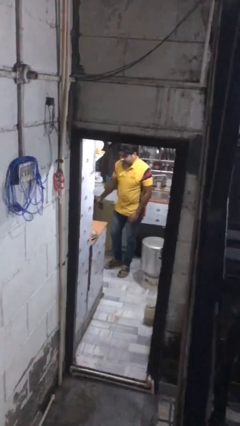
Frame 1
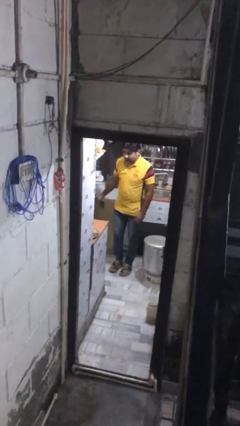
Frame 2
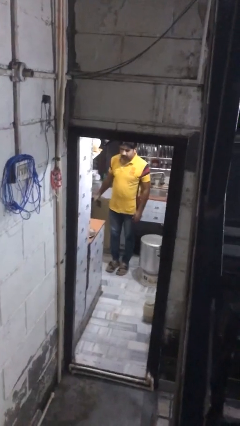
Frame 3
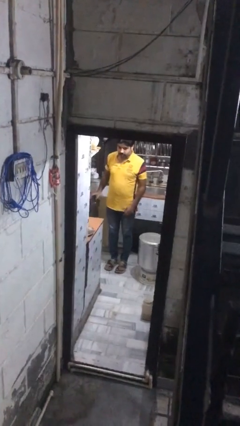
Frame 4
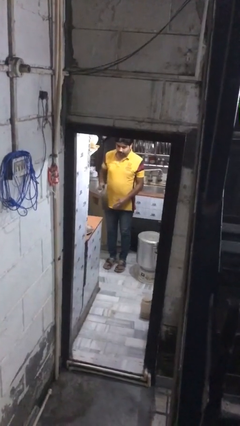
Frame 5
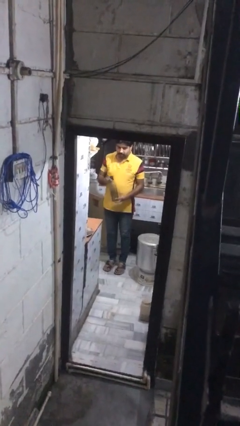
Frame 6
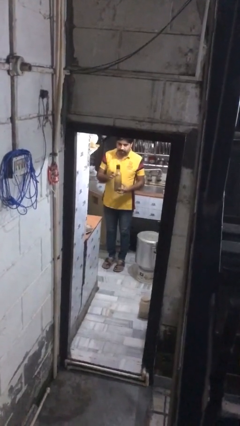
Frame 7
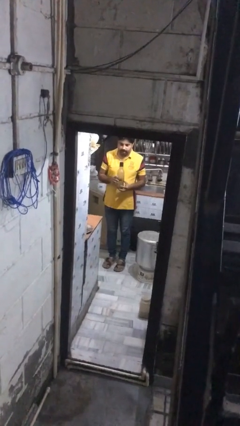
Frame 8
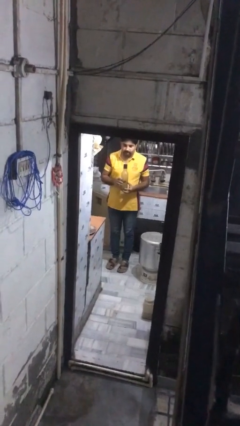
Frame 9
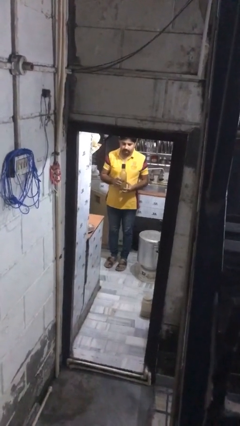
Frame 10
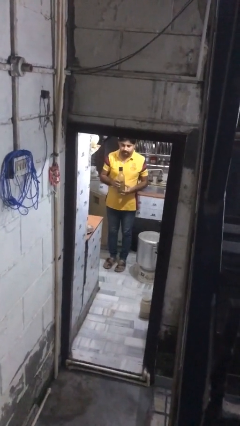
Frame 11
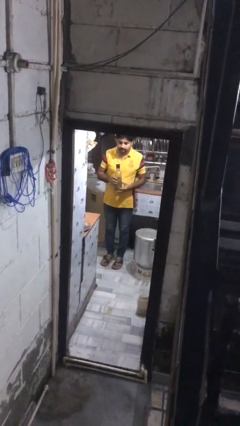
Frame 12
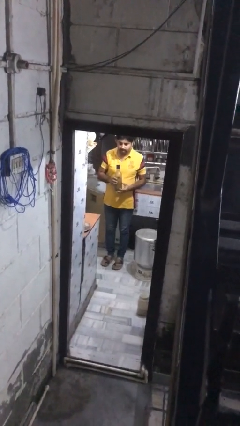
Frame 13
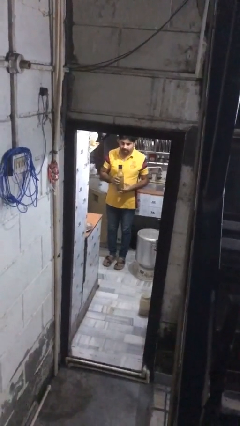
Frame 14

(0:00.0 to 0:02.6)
person takes object from kitchen drawer

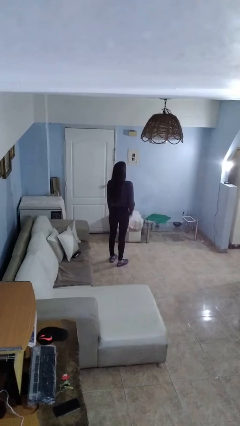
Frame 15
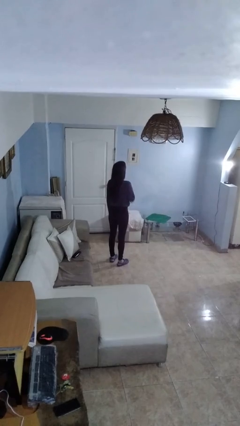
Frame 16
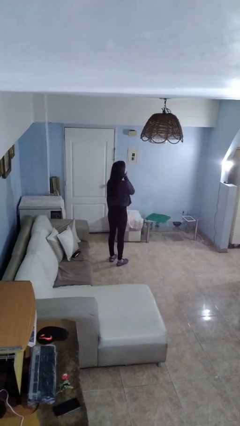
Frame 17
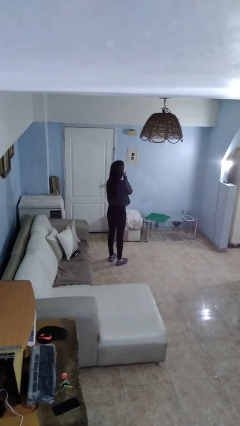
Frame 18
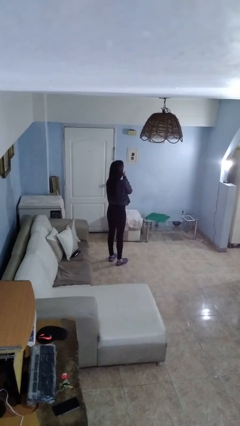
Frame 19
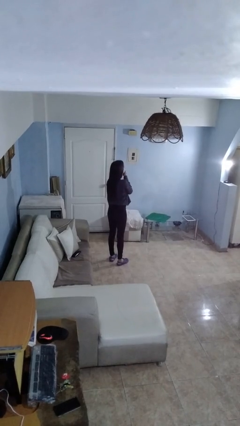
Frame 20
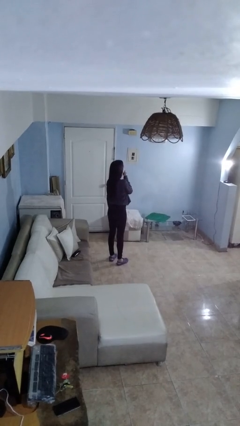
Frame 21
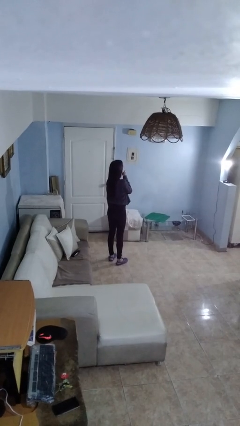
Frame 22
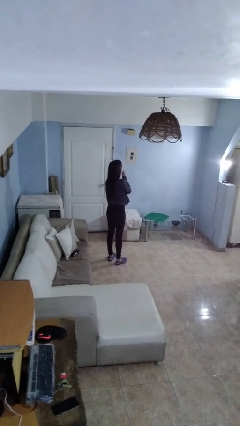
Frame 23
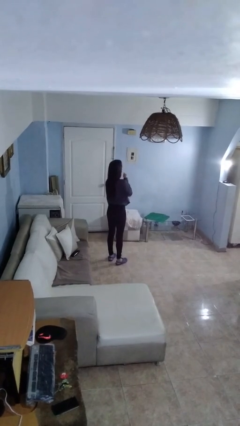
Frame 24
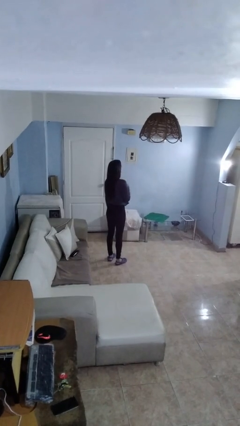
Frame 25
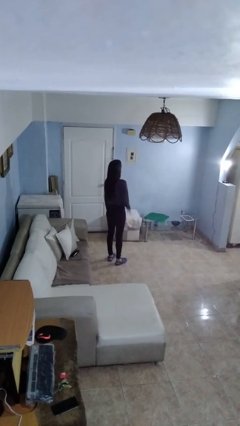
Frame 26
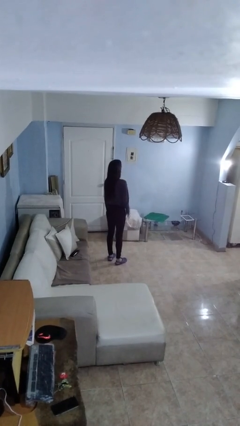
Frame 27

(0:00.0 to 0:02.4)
person strokes chin

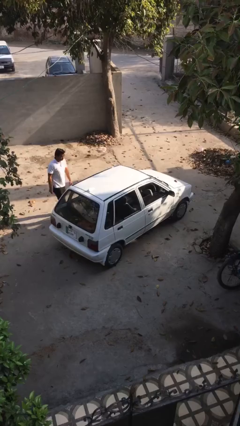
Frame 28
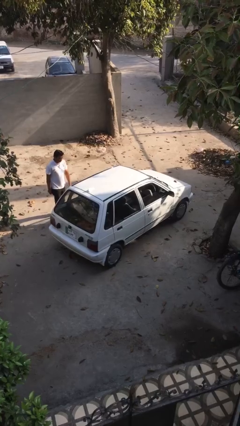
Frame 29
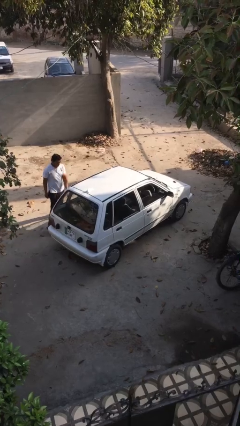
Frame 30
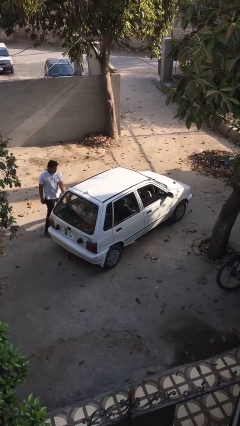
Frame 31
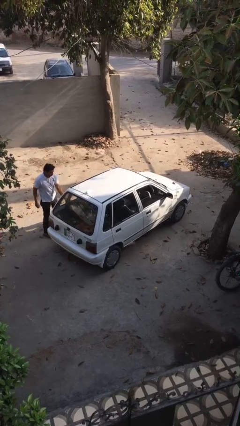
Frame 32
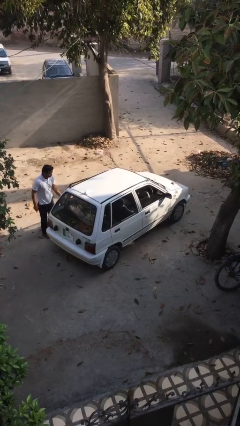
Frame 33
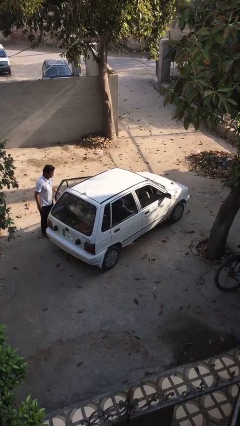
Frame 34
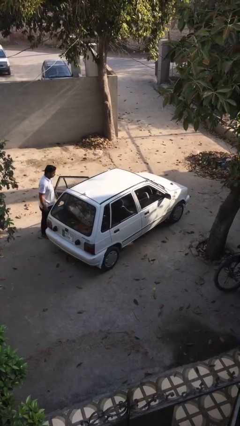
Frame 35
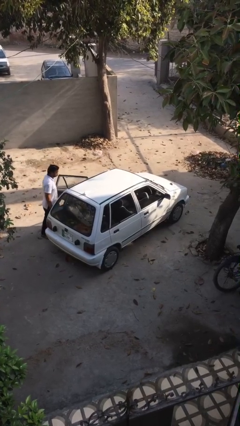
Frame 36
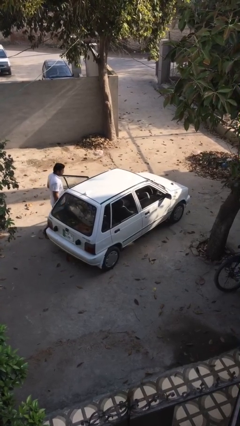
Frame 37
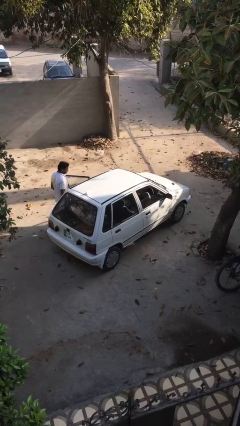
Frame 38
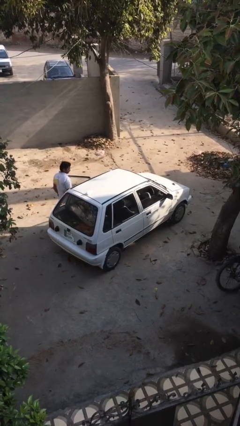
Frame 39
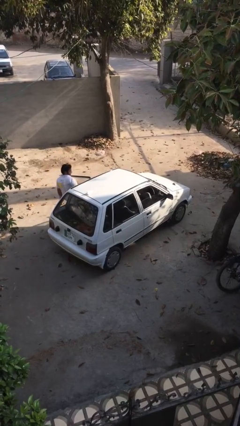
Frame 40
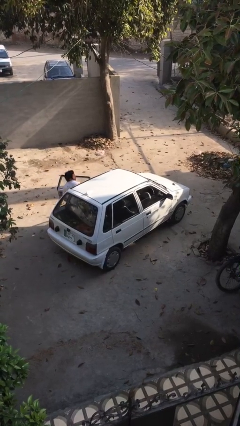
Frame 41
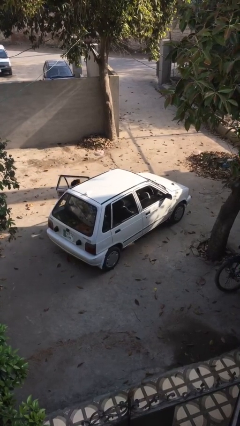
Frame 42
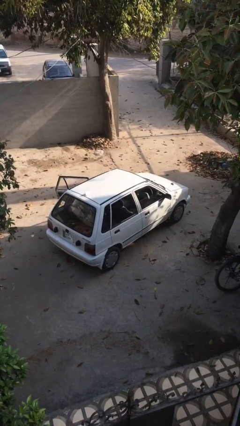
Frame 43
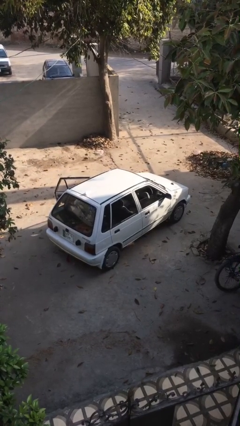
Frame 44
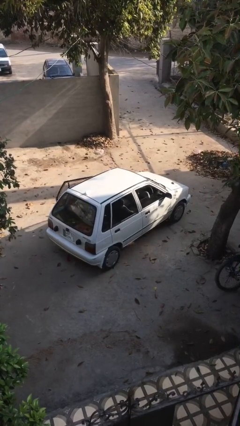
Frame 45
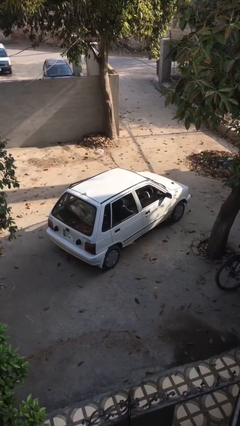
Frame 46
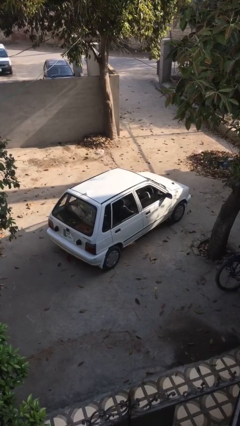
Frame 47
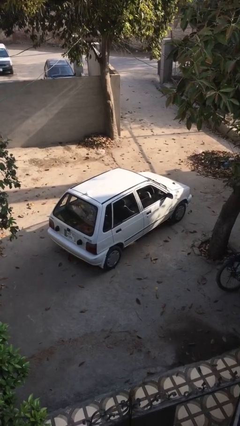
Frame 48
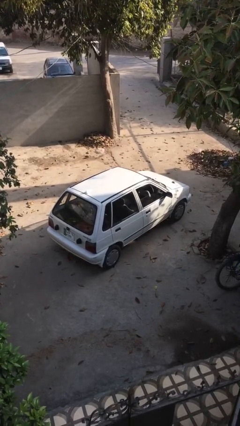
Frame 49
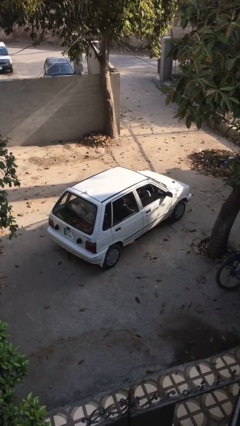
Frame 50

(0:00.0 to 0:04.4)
car picks up person

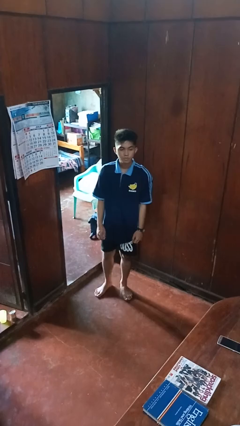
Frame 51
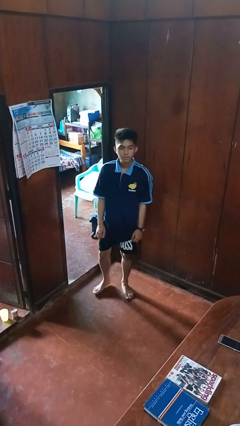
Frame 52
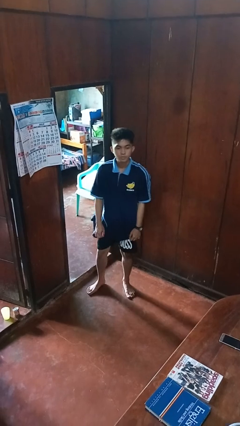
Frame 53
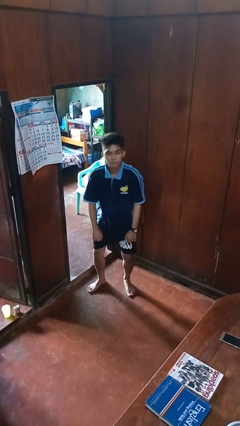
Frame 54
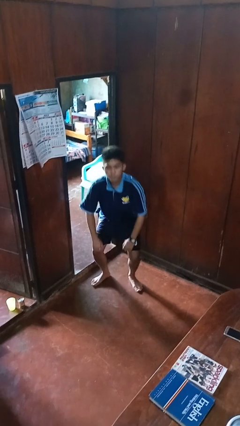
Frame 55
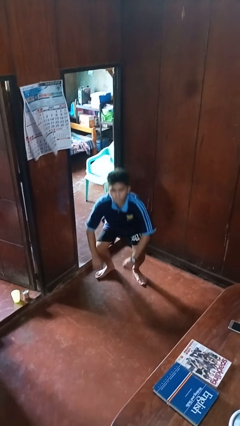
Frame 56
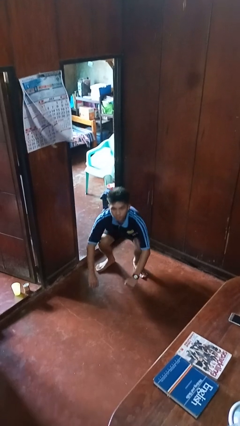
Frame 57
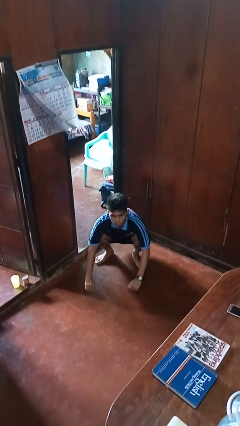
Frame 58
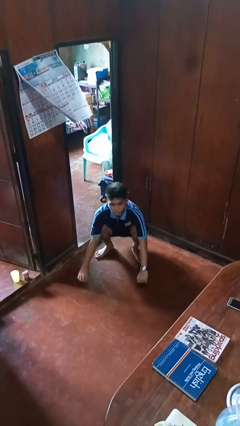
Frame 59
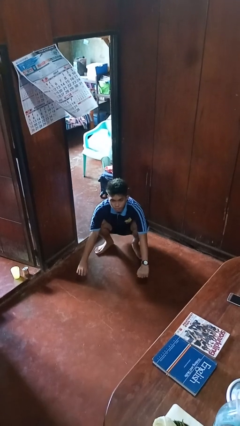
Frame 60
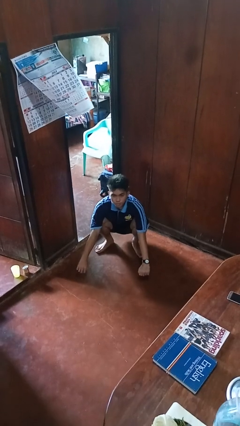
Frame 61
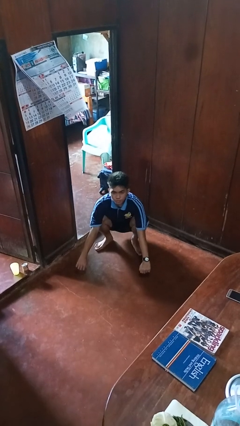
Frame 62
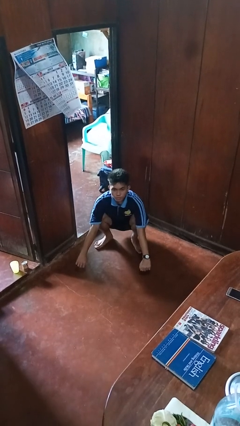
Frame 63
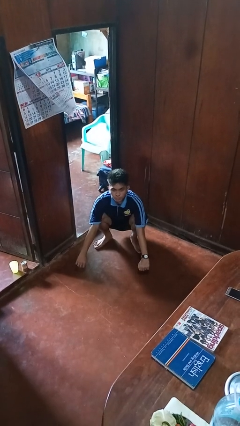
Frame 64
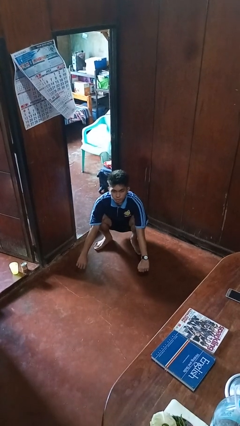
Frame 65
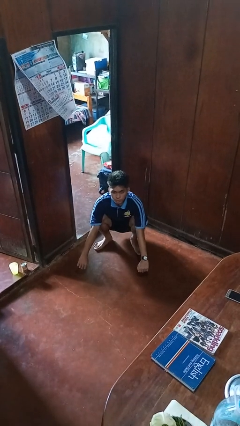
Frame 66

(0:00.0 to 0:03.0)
person squats

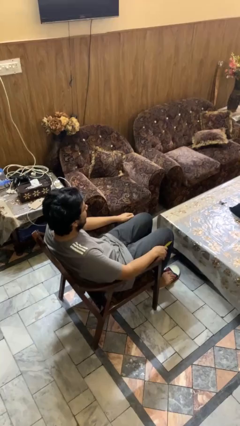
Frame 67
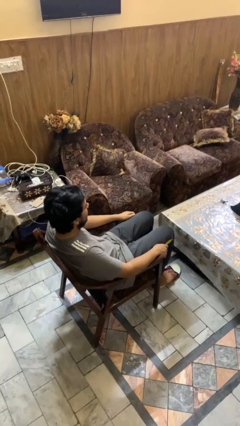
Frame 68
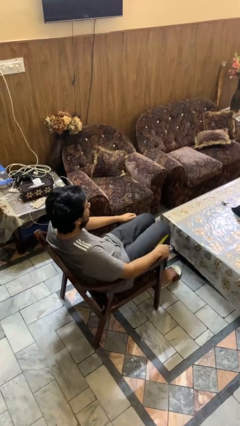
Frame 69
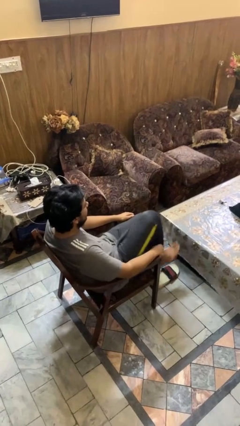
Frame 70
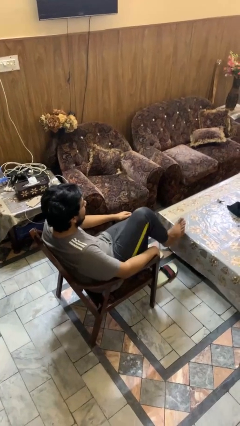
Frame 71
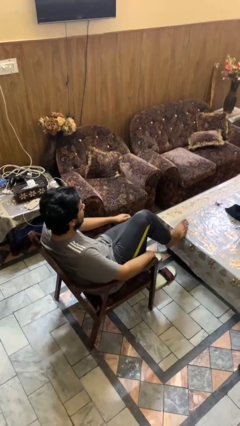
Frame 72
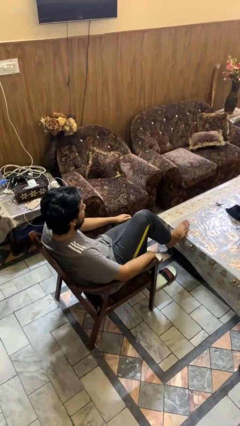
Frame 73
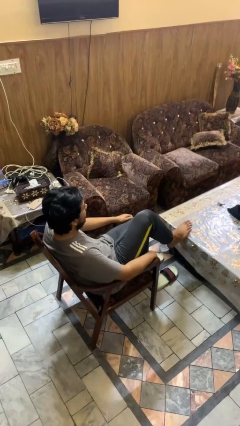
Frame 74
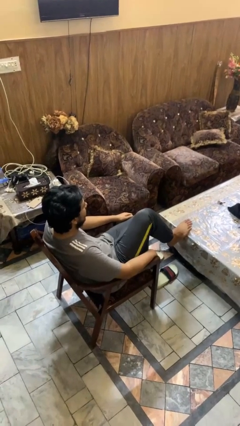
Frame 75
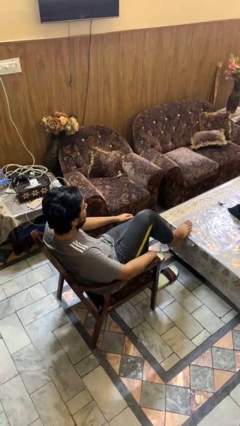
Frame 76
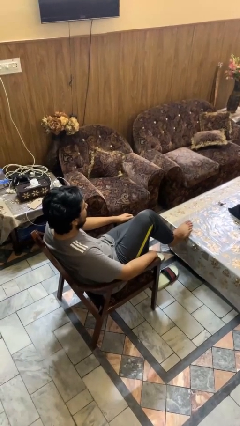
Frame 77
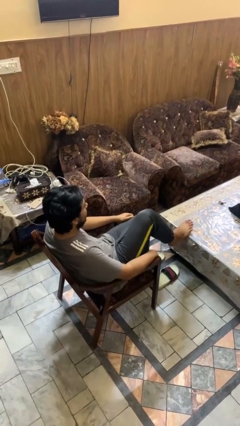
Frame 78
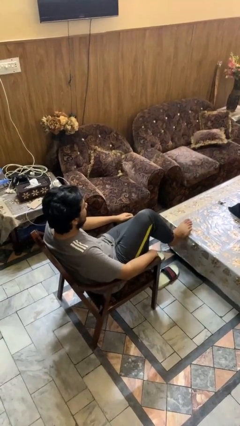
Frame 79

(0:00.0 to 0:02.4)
person puts feet up

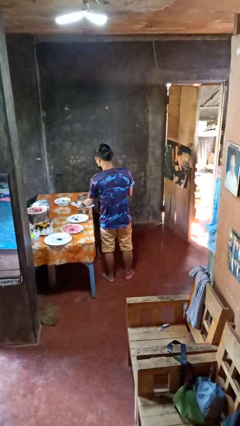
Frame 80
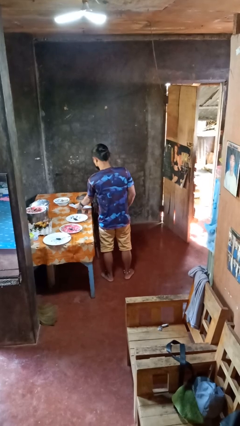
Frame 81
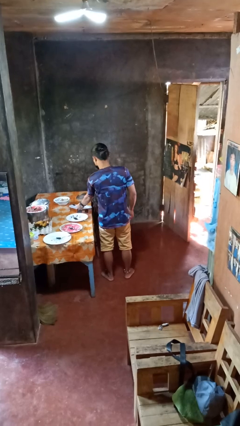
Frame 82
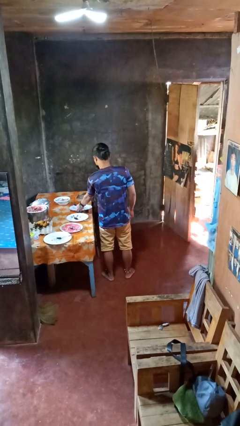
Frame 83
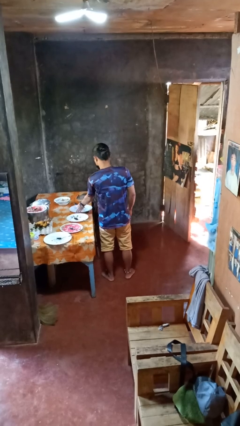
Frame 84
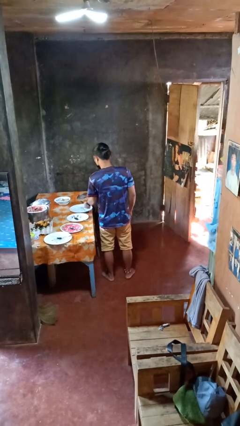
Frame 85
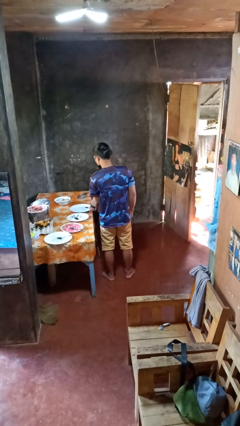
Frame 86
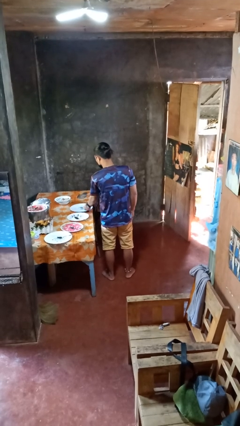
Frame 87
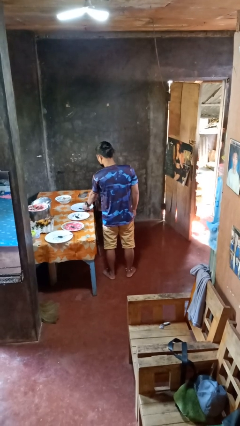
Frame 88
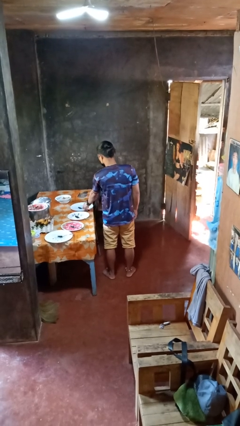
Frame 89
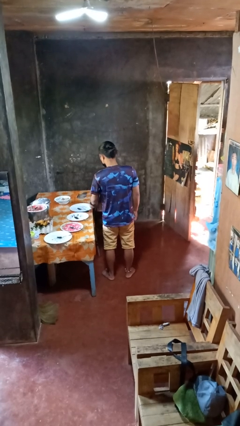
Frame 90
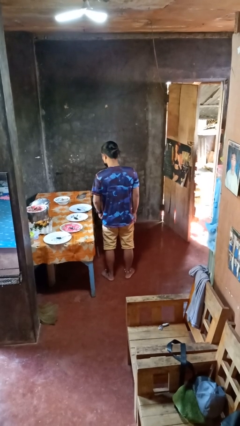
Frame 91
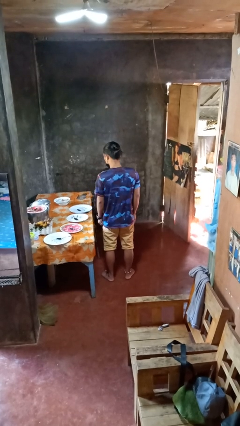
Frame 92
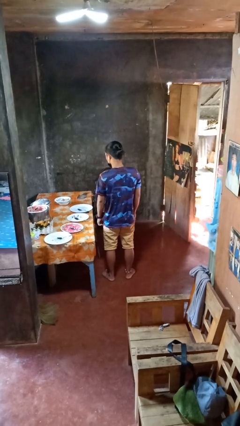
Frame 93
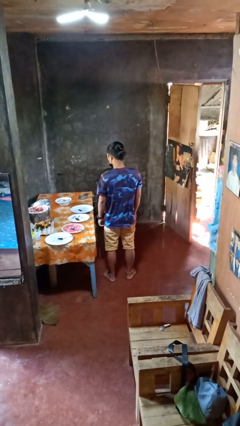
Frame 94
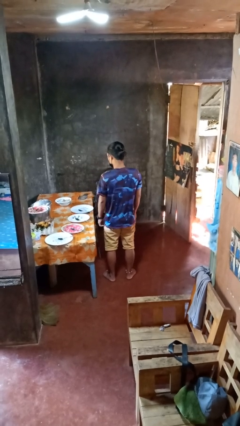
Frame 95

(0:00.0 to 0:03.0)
person sets table
